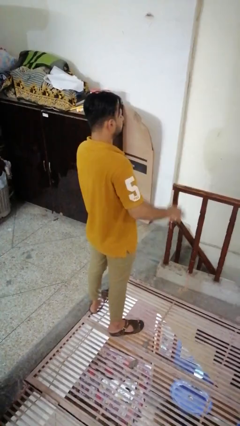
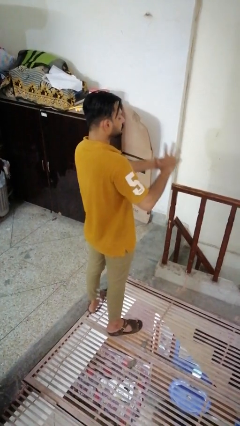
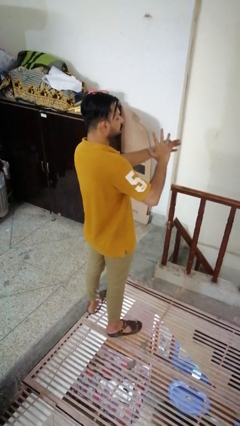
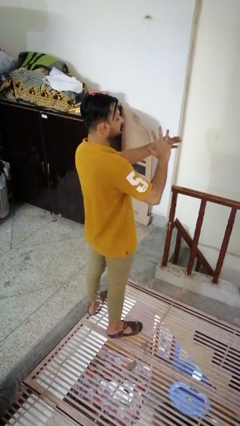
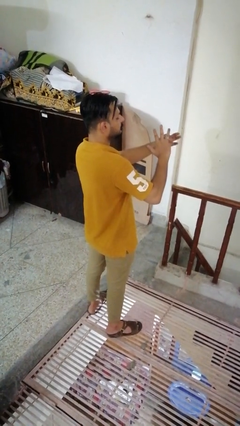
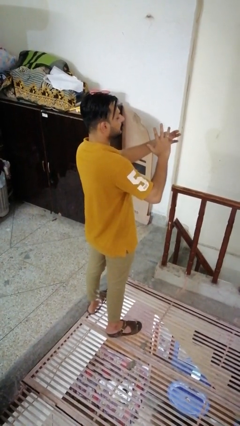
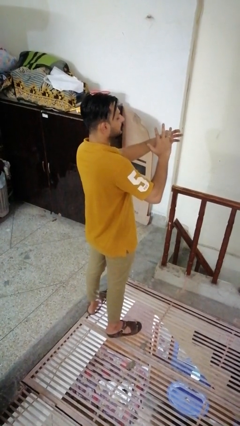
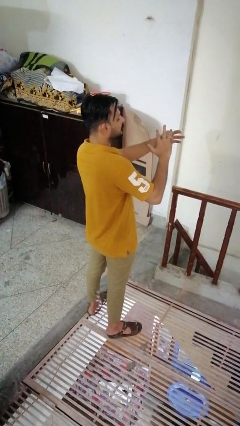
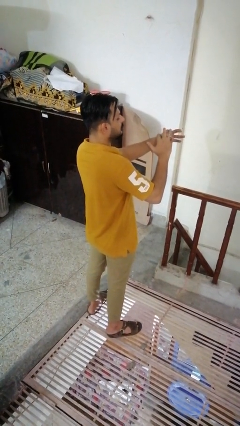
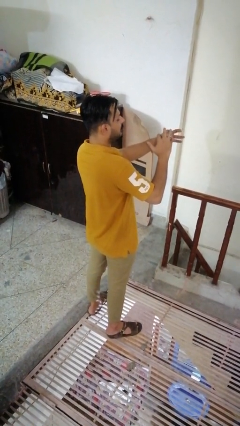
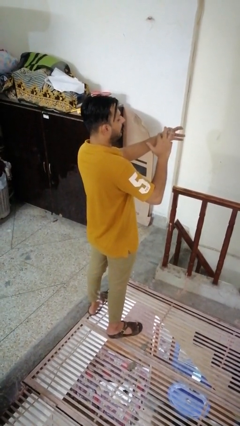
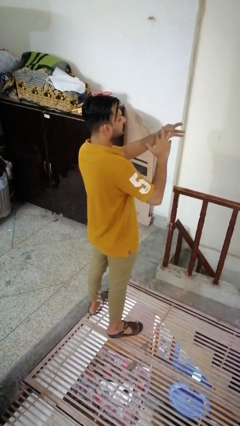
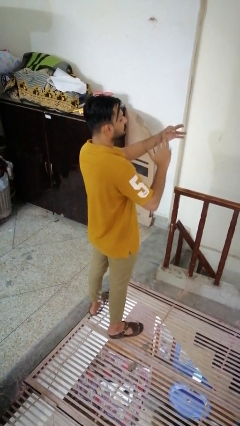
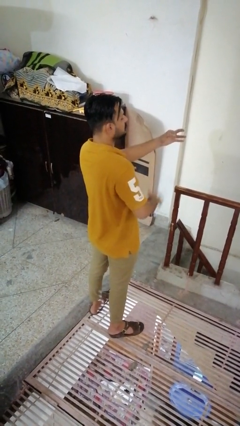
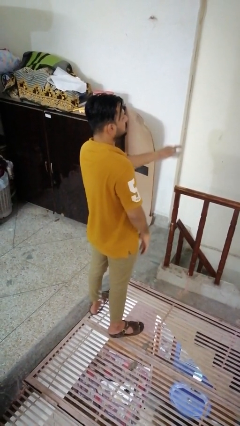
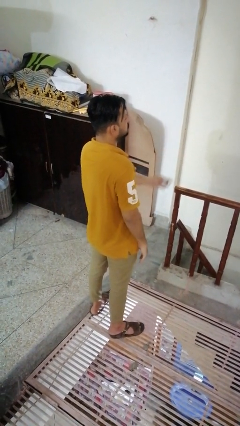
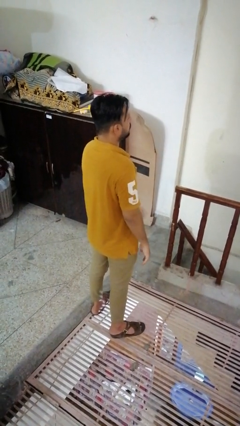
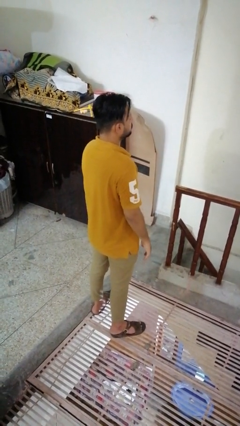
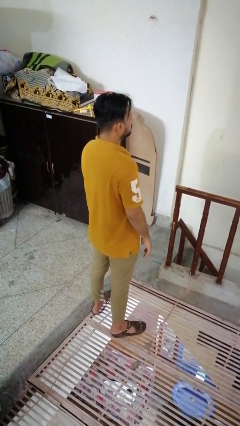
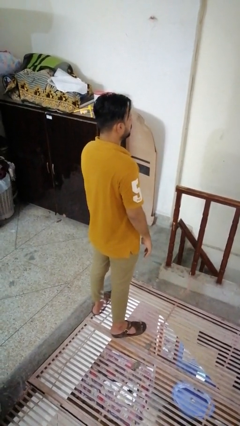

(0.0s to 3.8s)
person takes off ring

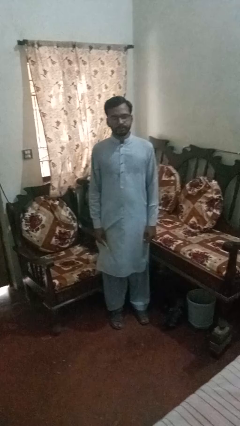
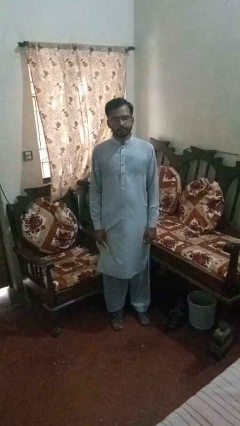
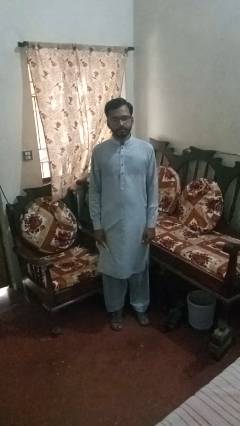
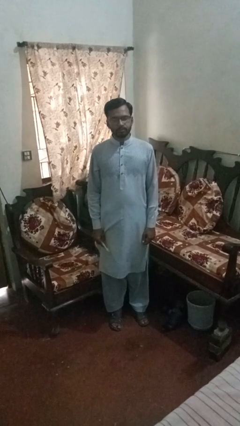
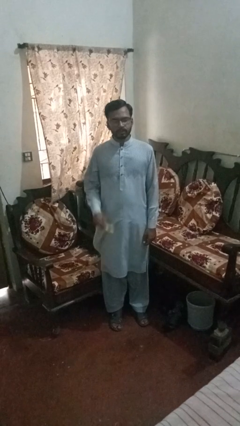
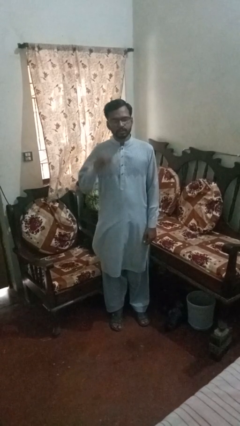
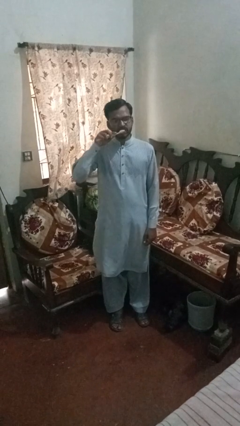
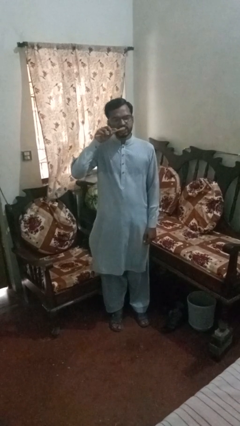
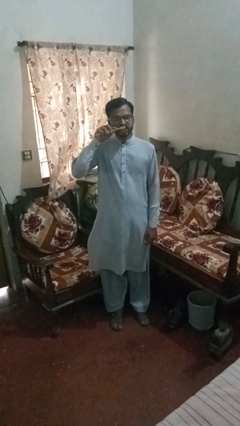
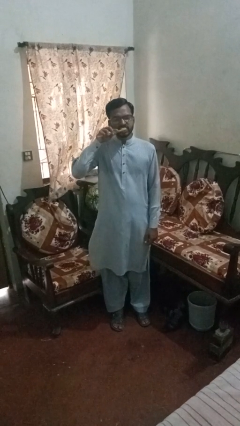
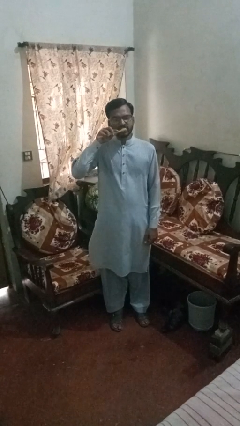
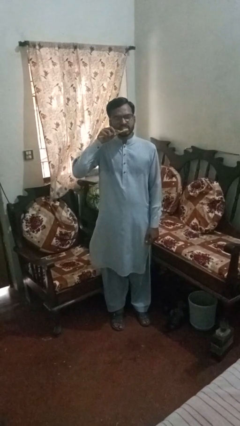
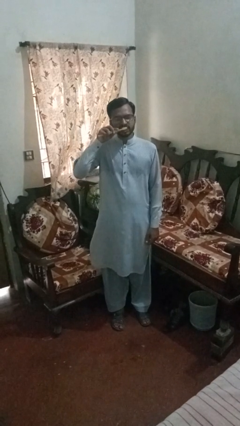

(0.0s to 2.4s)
person brushes teeth

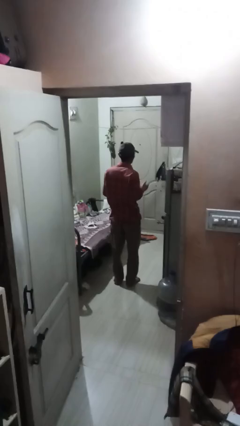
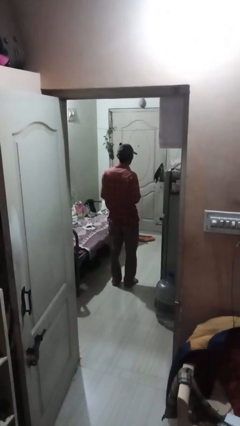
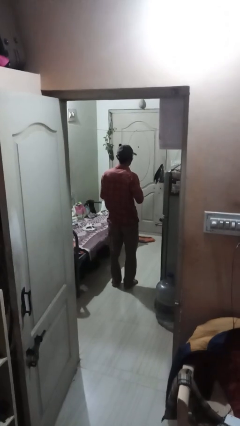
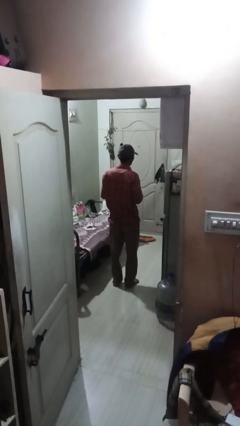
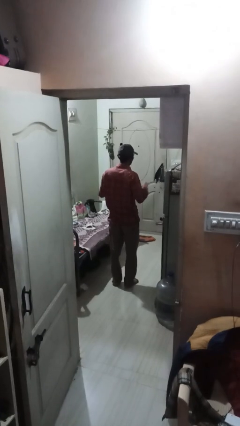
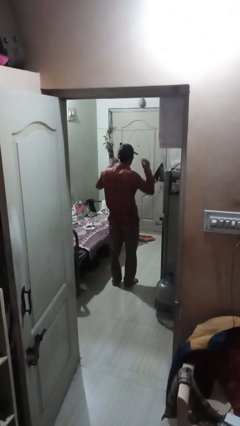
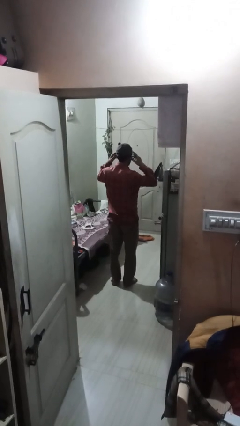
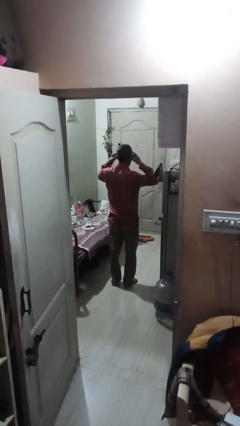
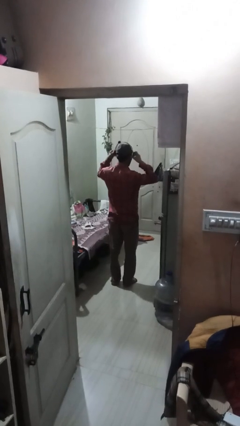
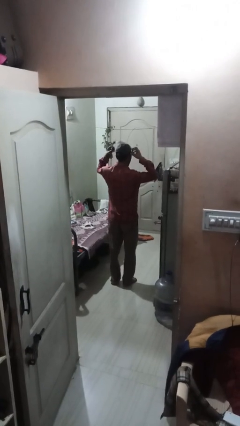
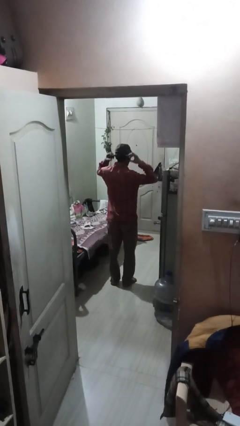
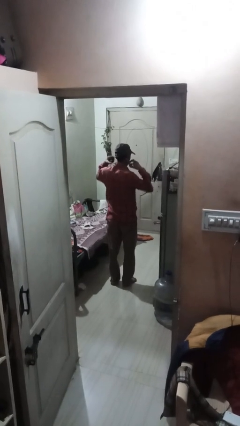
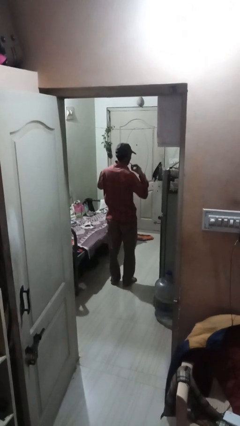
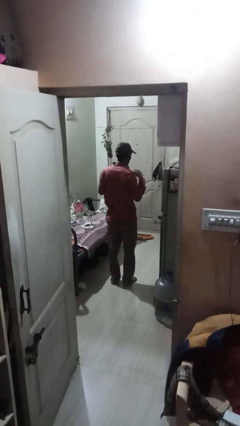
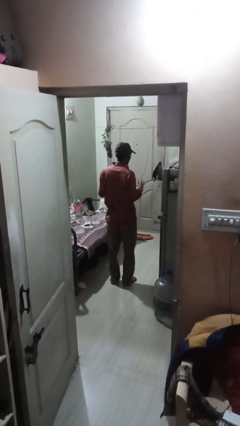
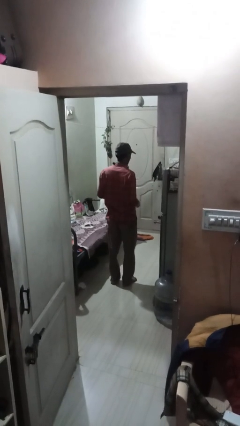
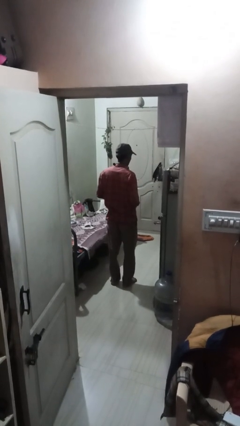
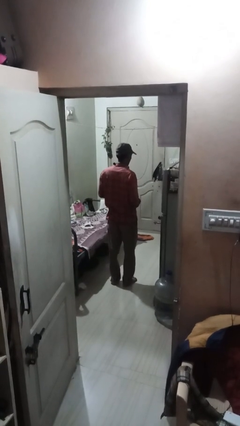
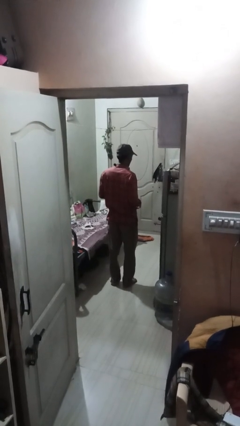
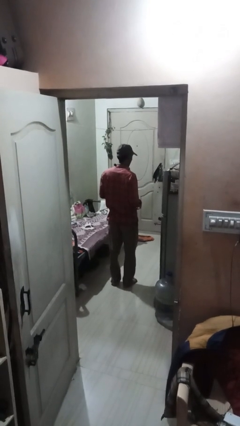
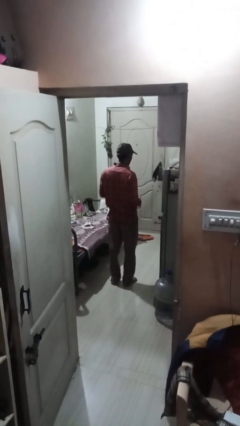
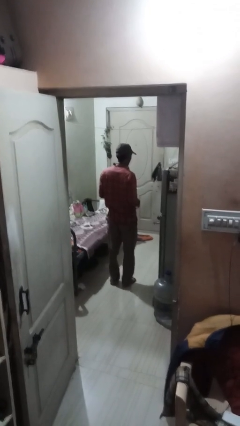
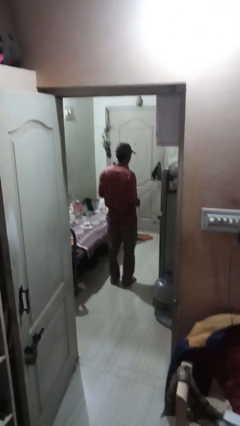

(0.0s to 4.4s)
person takes off headphones

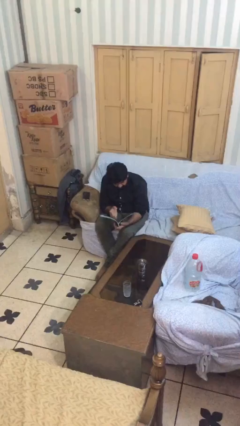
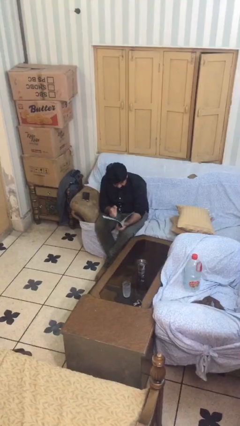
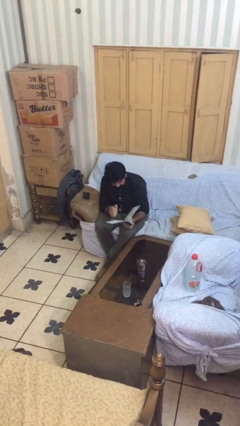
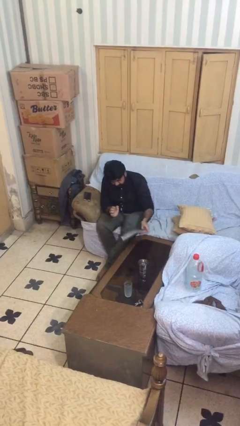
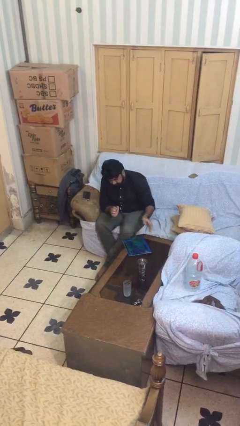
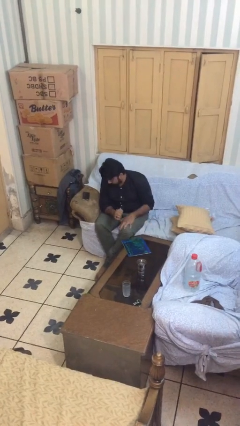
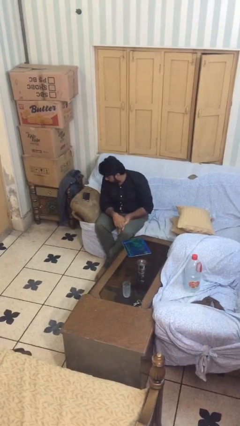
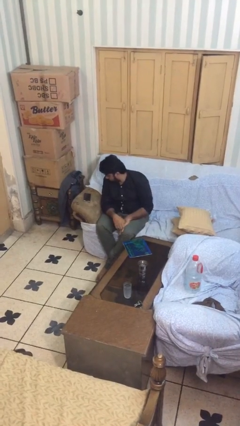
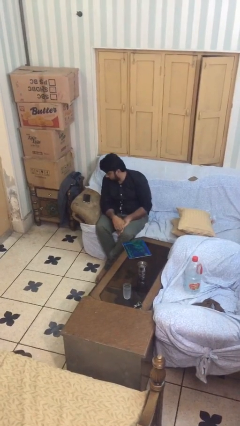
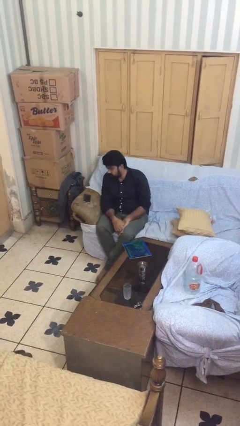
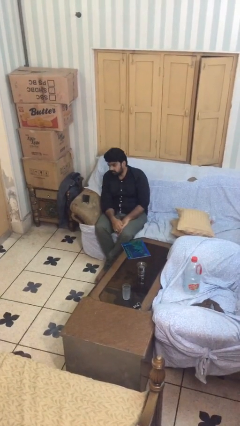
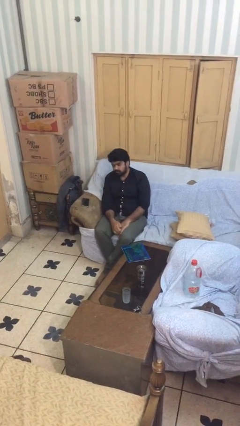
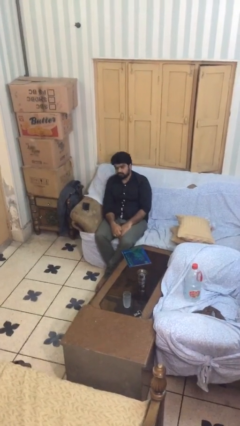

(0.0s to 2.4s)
person puts down object on table

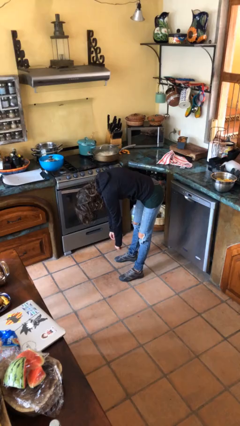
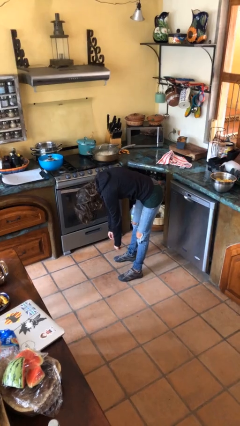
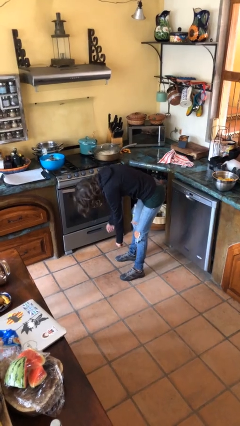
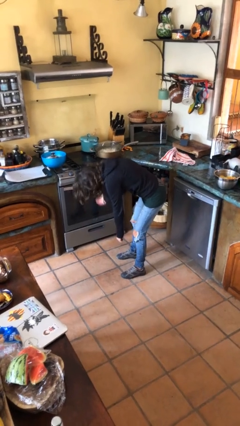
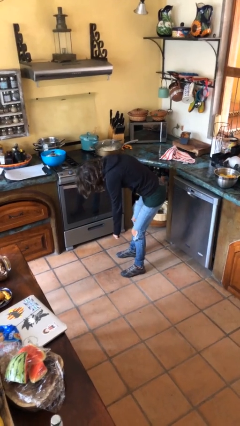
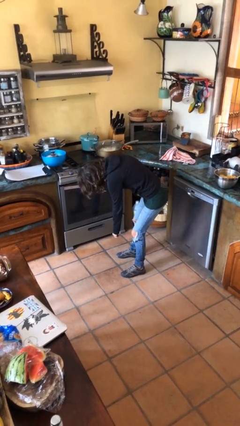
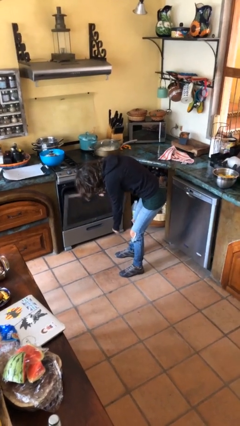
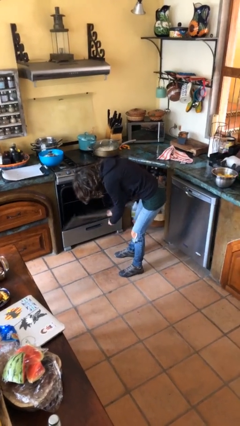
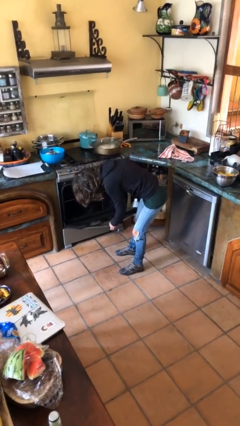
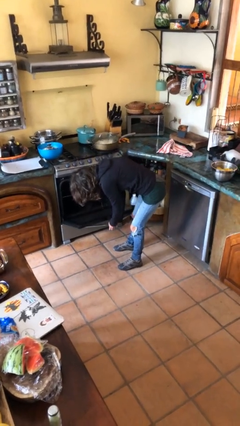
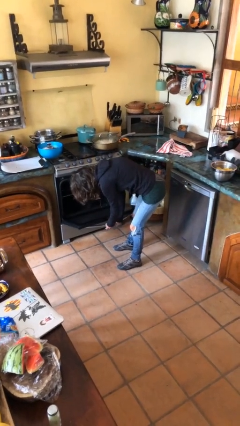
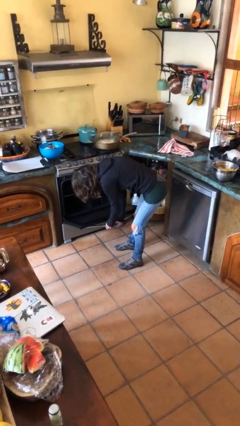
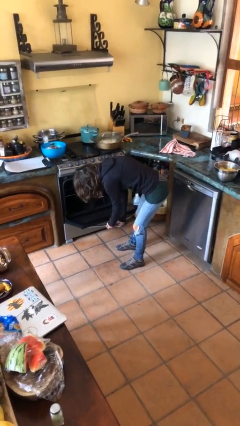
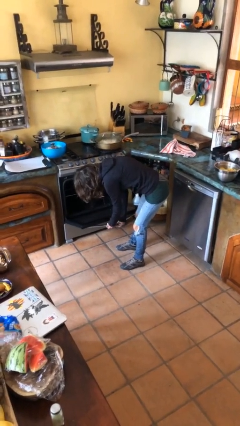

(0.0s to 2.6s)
person opens oven door

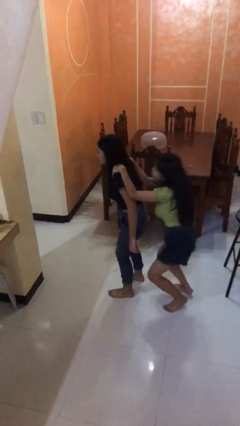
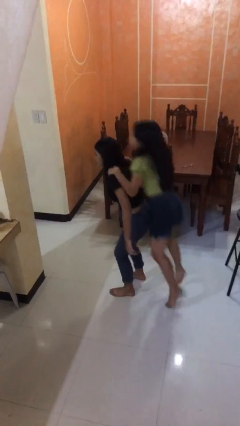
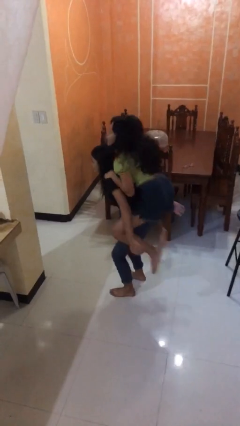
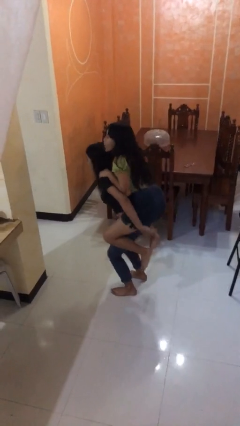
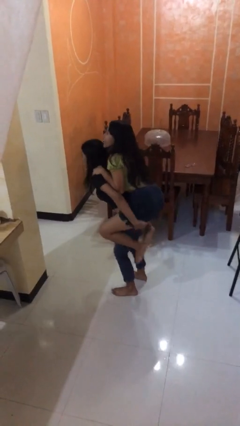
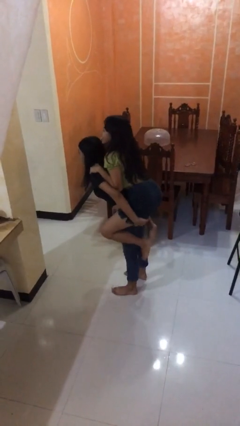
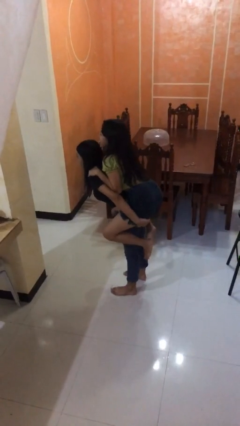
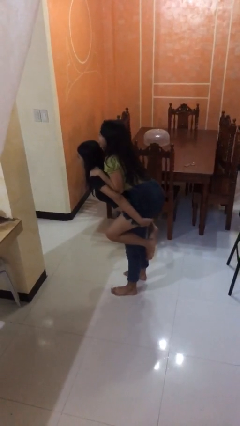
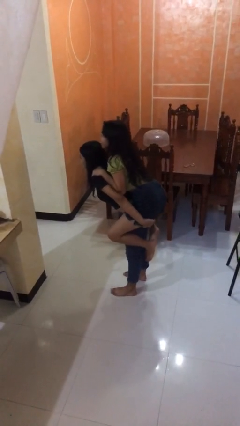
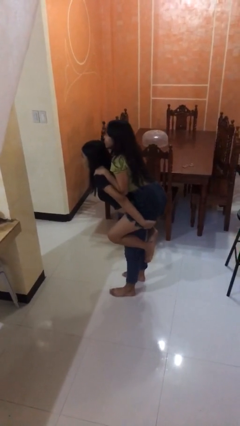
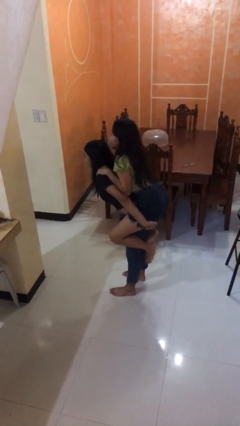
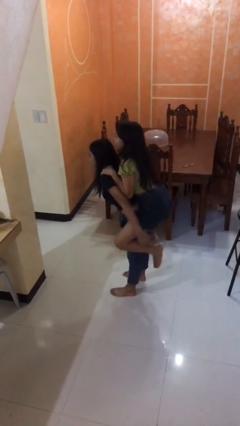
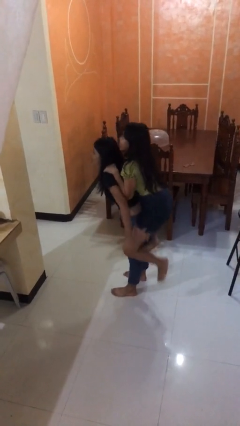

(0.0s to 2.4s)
person carries person over shoulder
